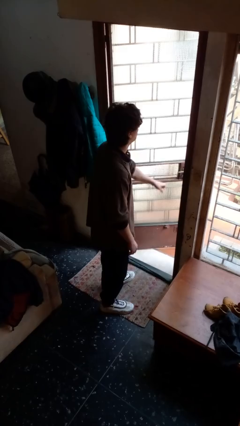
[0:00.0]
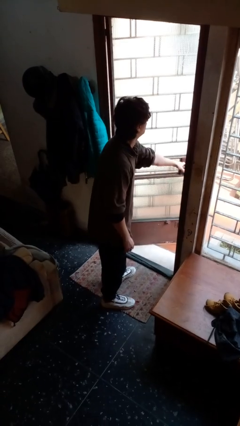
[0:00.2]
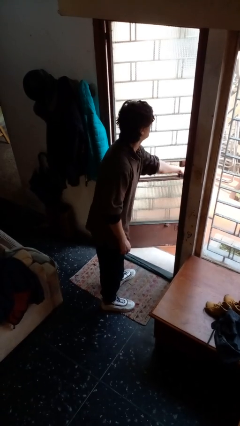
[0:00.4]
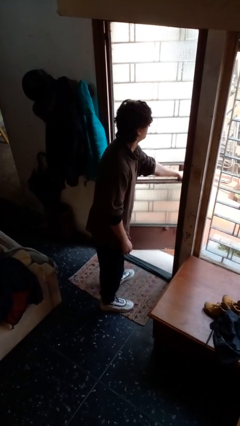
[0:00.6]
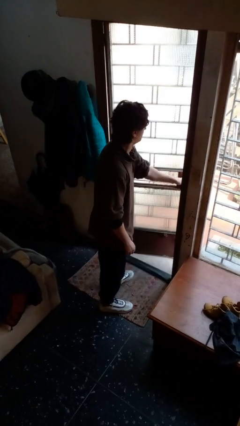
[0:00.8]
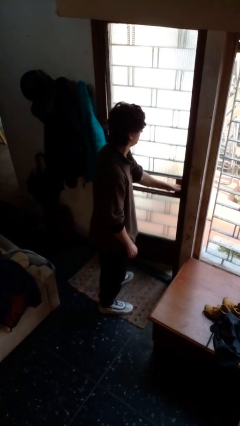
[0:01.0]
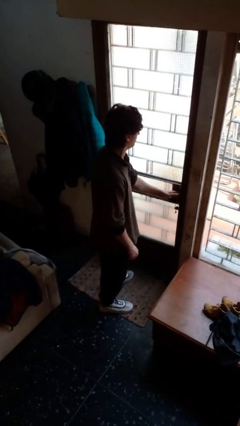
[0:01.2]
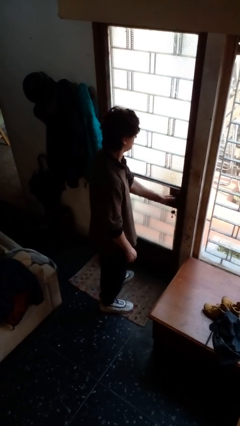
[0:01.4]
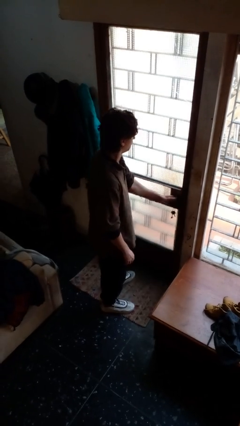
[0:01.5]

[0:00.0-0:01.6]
person closes facility door

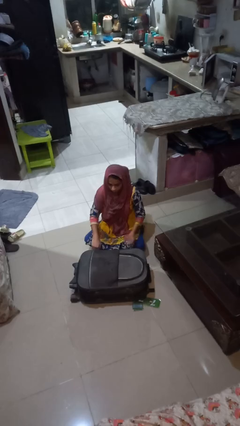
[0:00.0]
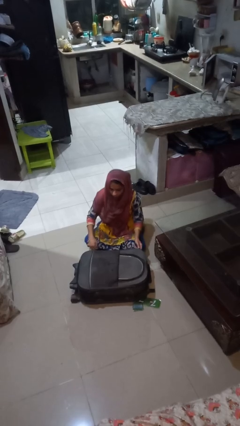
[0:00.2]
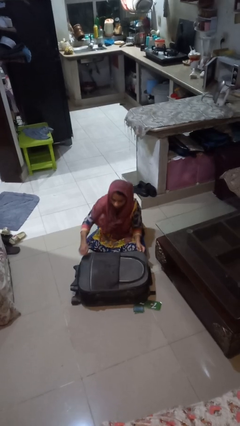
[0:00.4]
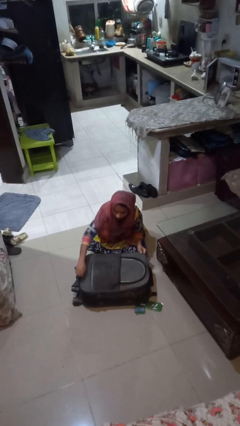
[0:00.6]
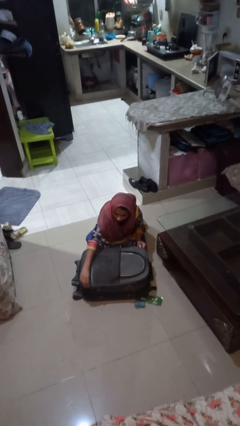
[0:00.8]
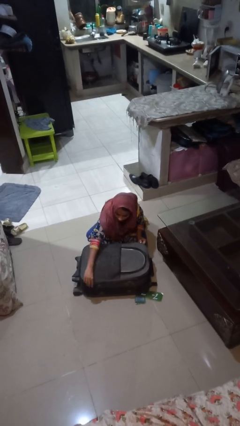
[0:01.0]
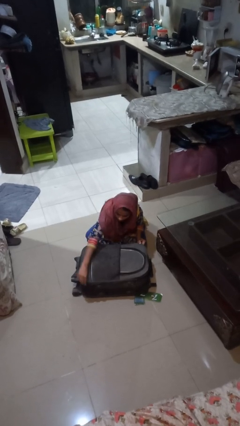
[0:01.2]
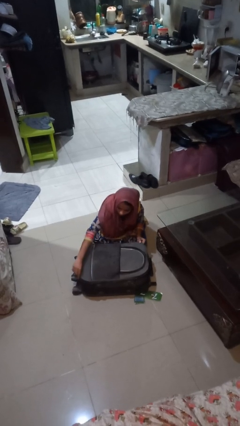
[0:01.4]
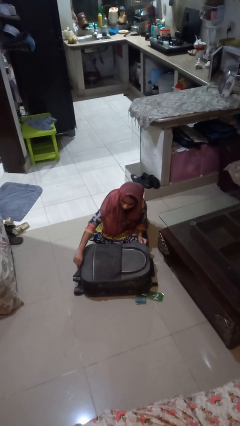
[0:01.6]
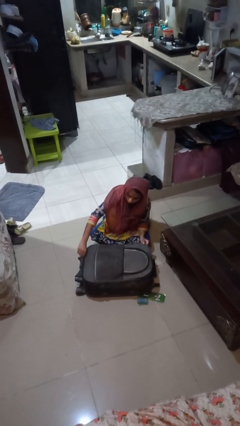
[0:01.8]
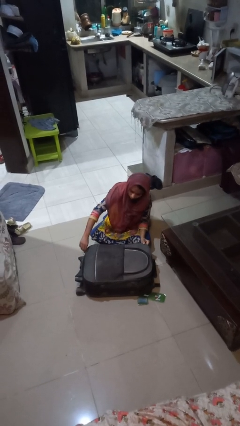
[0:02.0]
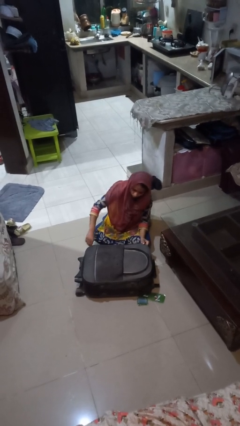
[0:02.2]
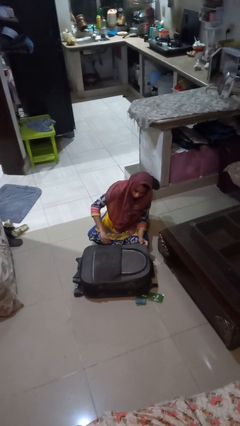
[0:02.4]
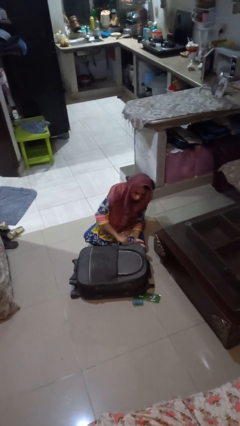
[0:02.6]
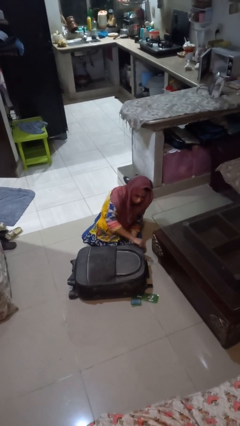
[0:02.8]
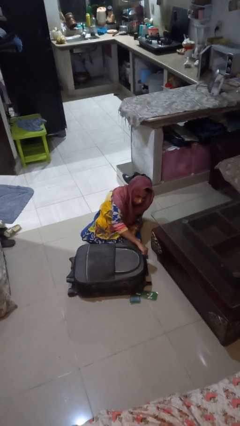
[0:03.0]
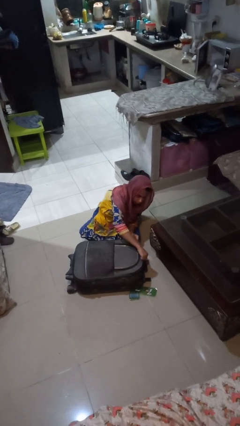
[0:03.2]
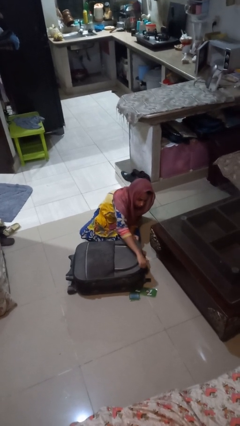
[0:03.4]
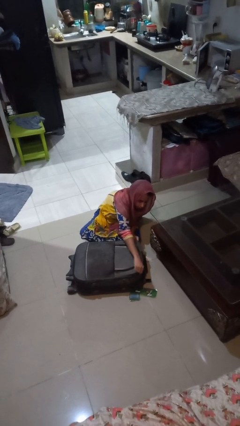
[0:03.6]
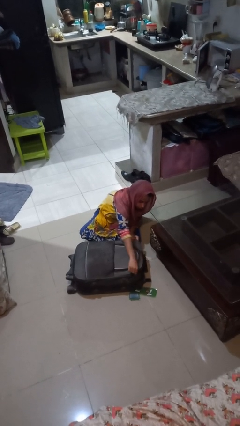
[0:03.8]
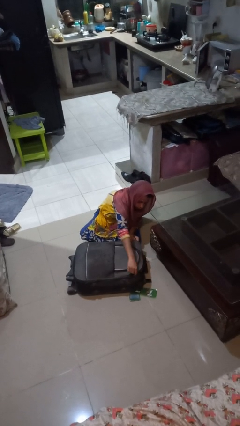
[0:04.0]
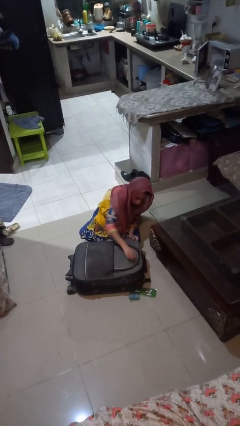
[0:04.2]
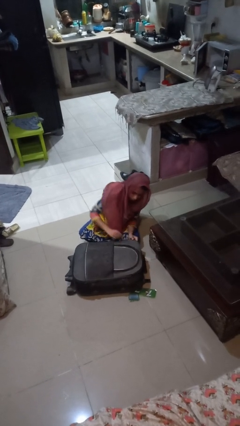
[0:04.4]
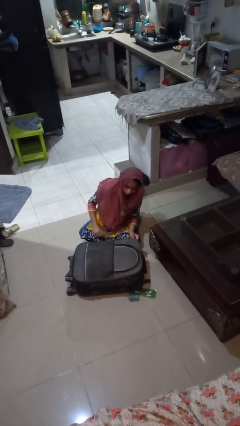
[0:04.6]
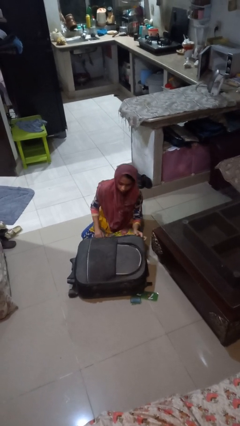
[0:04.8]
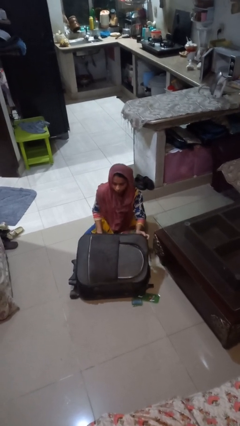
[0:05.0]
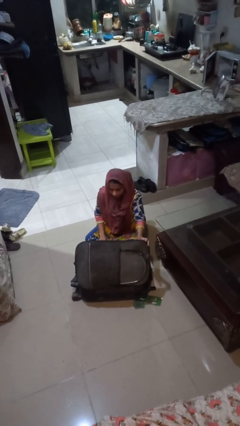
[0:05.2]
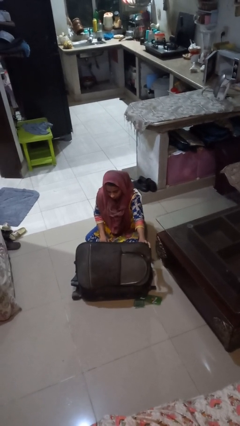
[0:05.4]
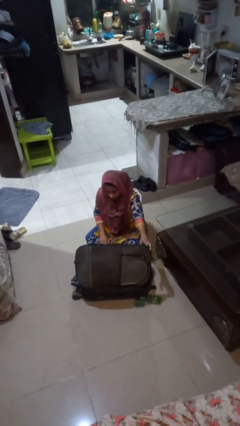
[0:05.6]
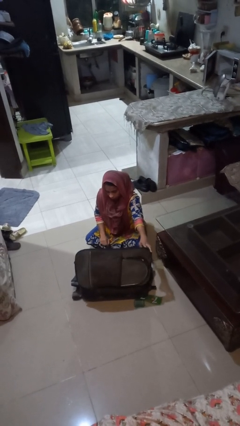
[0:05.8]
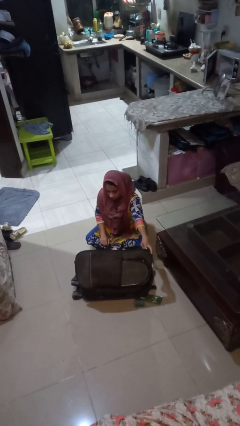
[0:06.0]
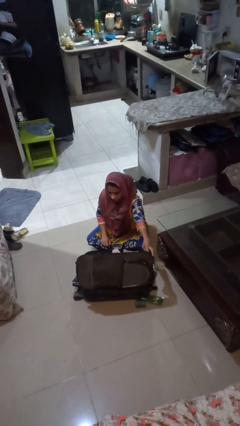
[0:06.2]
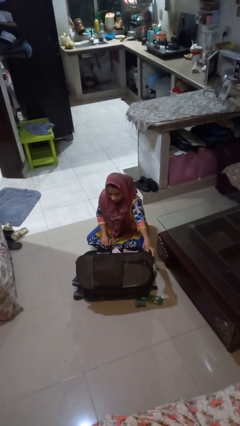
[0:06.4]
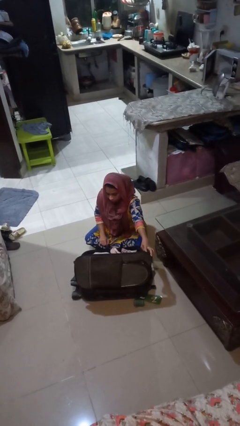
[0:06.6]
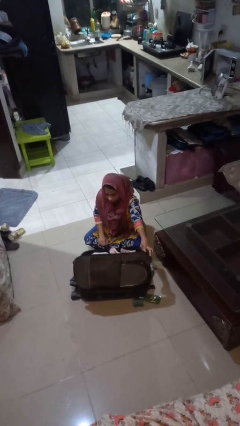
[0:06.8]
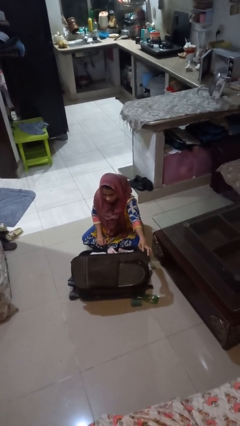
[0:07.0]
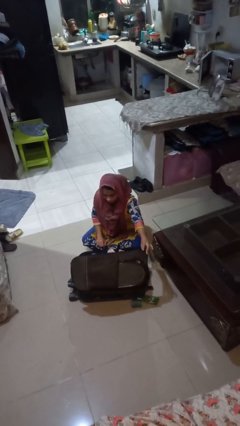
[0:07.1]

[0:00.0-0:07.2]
person opens suitcase

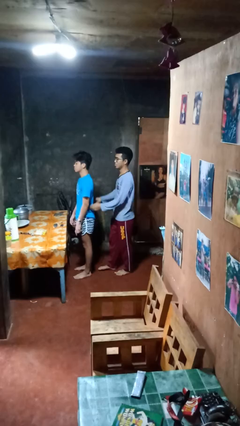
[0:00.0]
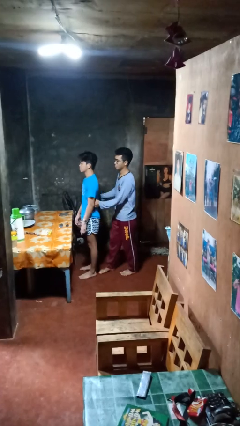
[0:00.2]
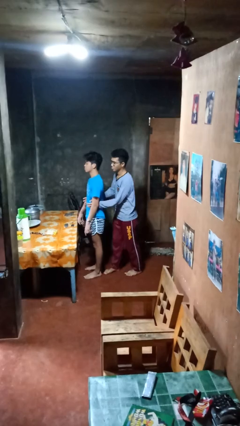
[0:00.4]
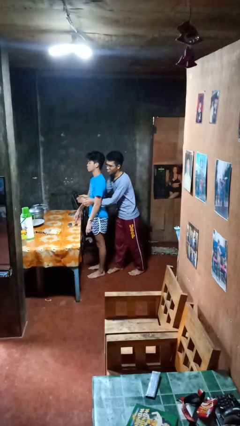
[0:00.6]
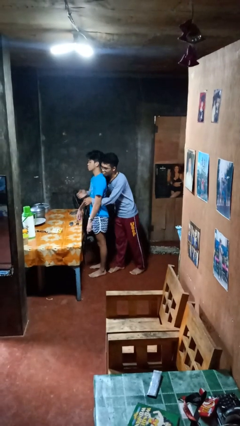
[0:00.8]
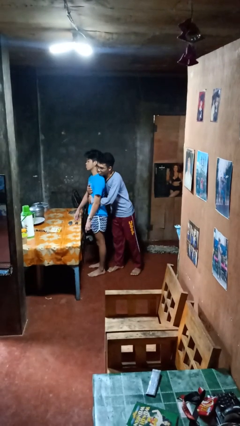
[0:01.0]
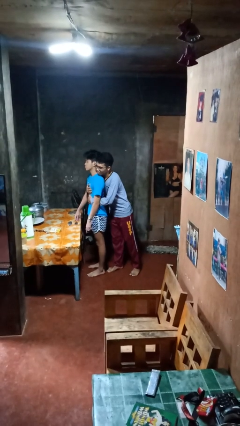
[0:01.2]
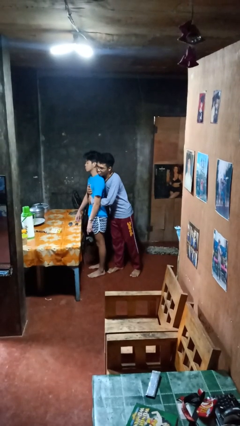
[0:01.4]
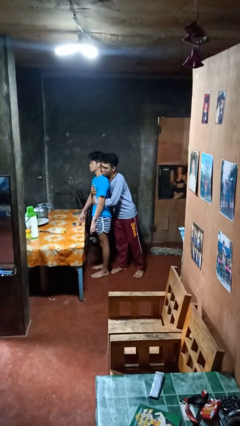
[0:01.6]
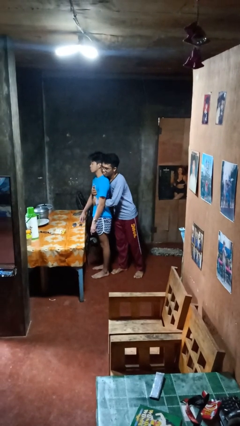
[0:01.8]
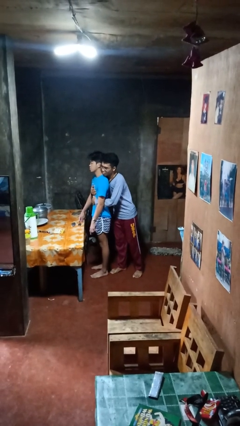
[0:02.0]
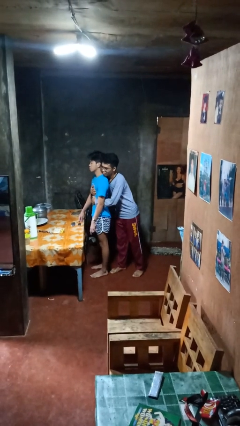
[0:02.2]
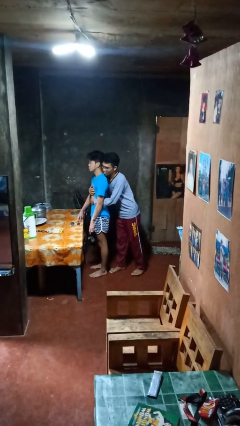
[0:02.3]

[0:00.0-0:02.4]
person hugs person from behind

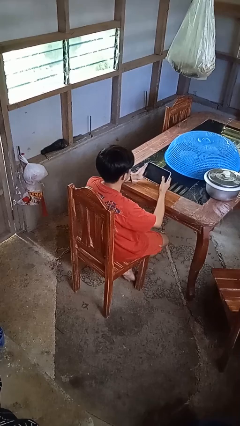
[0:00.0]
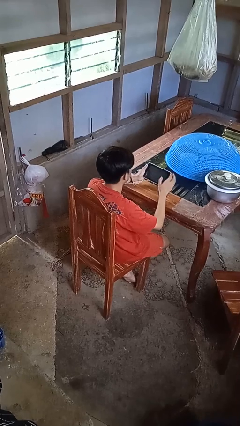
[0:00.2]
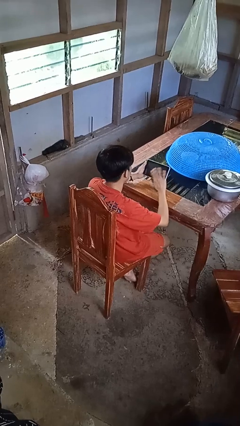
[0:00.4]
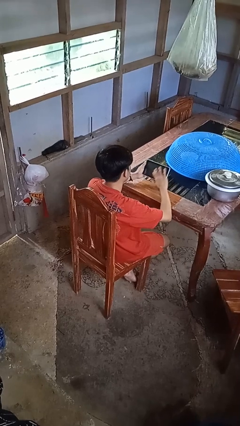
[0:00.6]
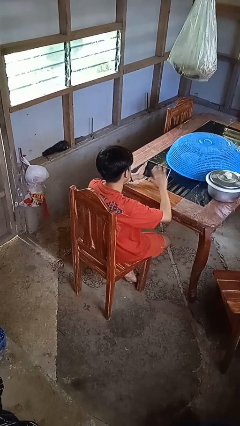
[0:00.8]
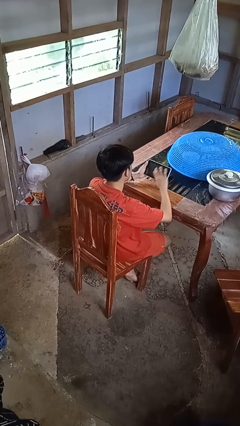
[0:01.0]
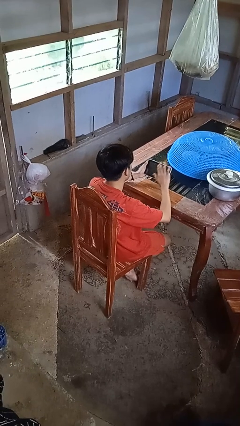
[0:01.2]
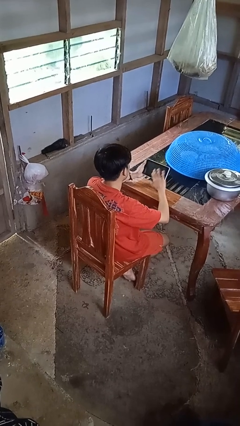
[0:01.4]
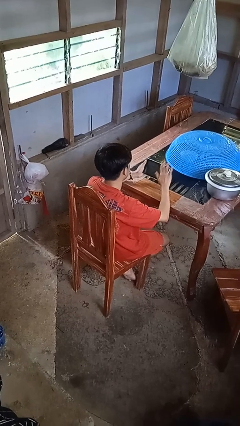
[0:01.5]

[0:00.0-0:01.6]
person interacts with tablet

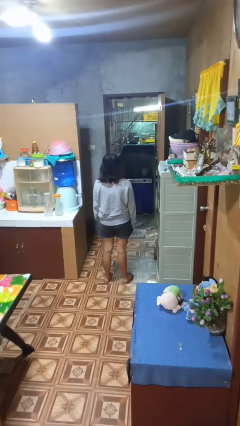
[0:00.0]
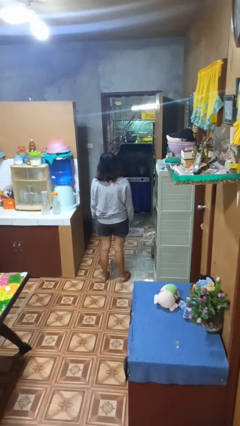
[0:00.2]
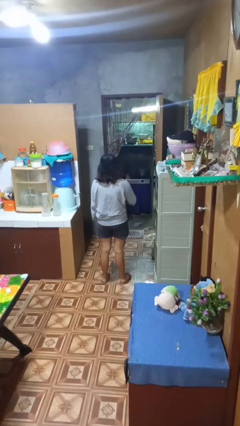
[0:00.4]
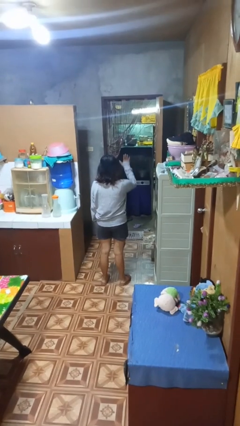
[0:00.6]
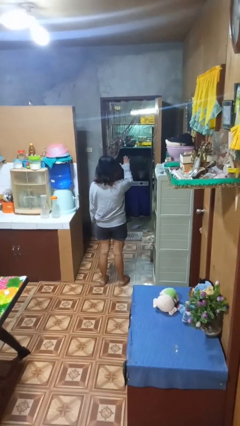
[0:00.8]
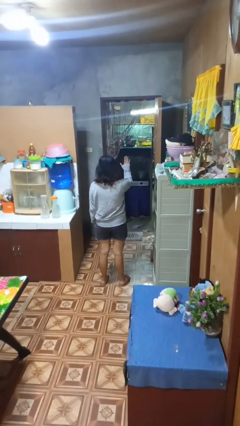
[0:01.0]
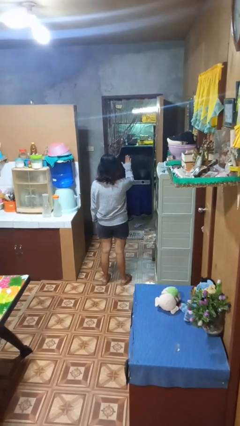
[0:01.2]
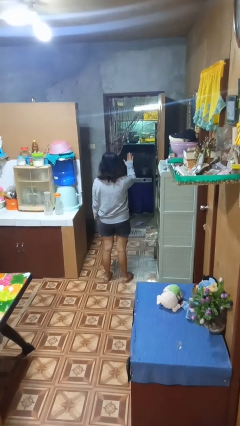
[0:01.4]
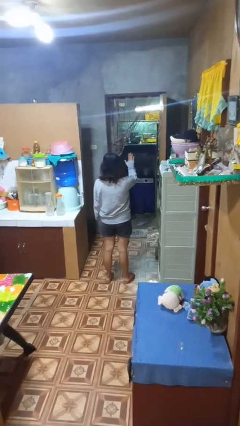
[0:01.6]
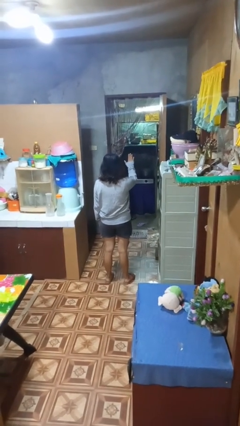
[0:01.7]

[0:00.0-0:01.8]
person gestures stop

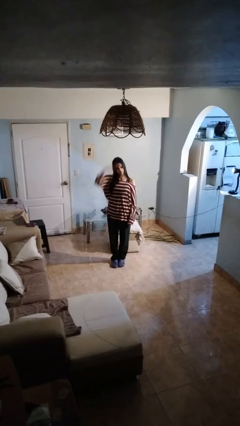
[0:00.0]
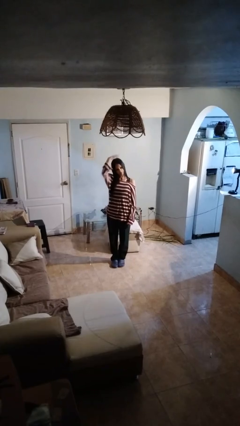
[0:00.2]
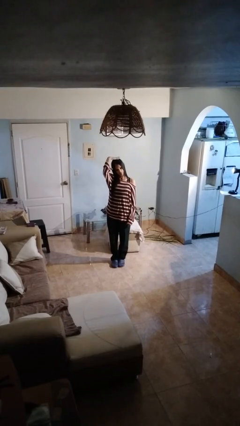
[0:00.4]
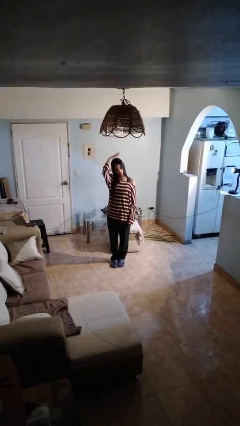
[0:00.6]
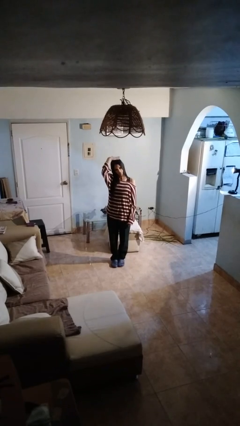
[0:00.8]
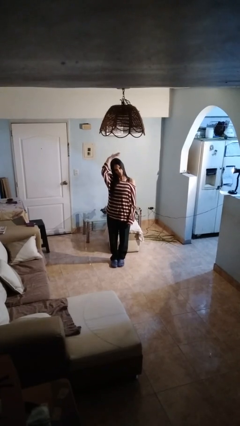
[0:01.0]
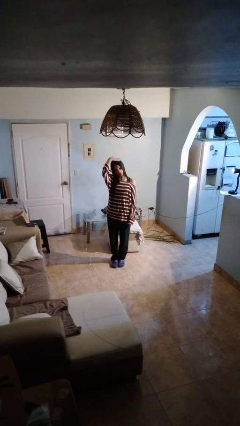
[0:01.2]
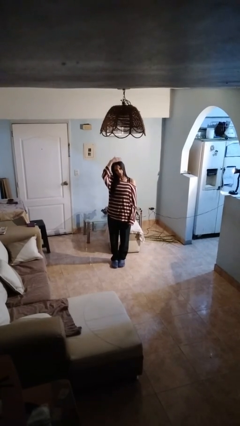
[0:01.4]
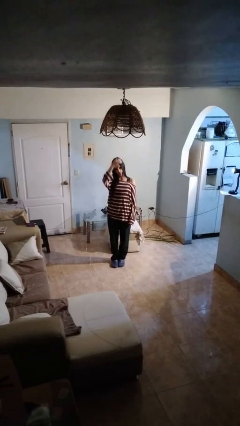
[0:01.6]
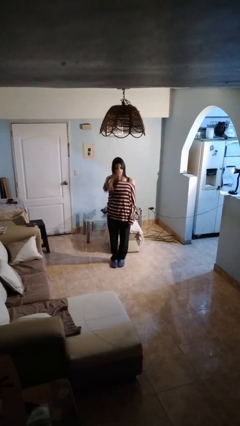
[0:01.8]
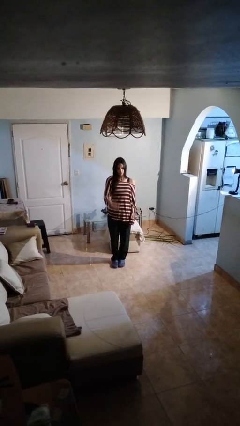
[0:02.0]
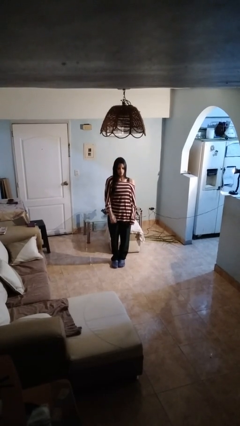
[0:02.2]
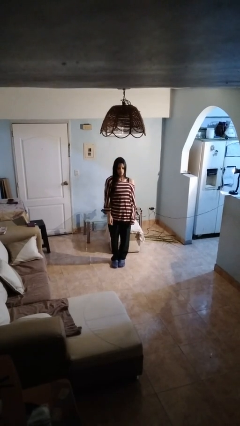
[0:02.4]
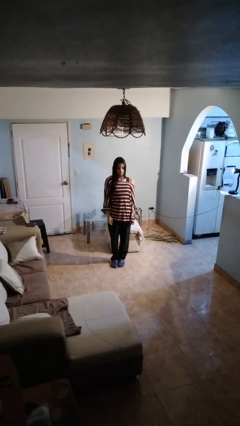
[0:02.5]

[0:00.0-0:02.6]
person pats head
